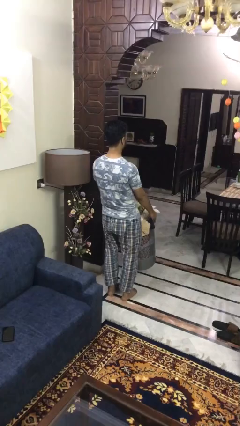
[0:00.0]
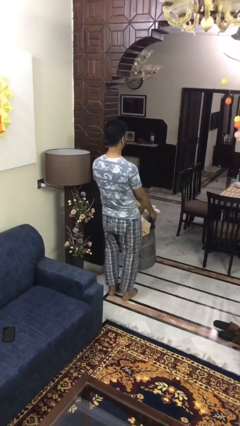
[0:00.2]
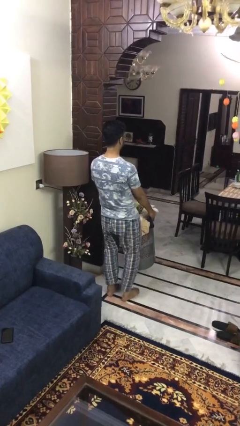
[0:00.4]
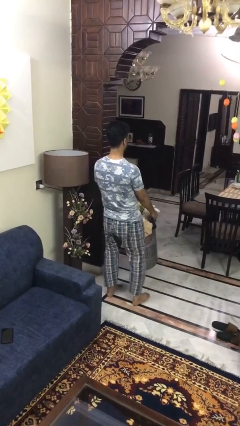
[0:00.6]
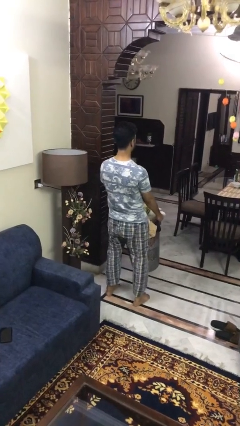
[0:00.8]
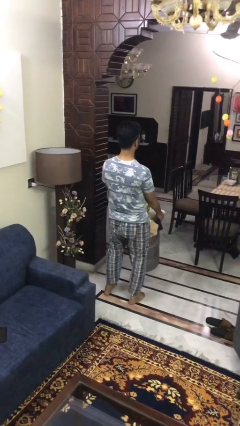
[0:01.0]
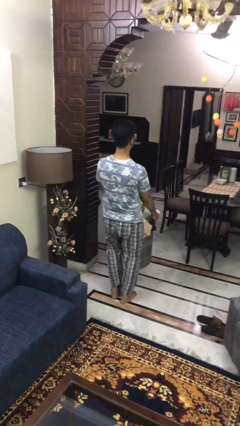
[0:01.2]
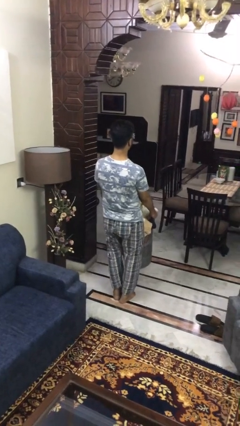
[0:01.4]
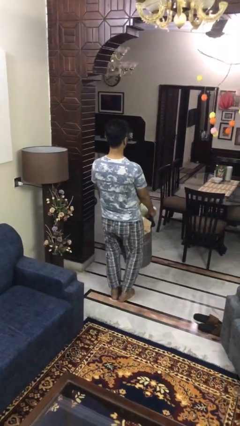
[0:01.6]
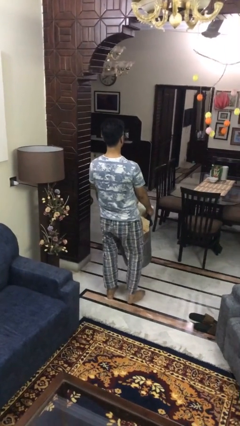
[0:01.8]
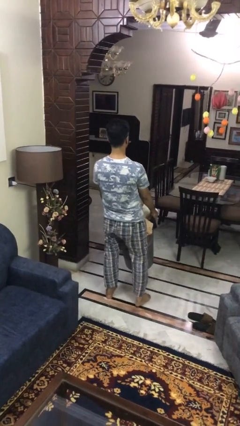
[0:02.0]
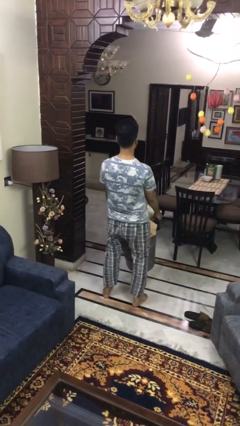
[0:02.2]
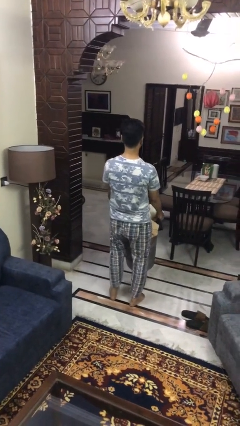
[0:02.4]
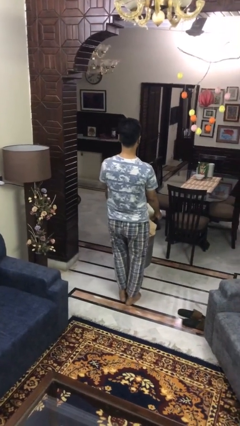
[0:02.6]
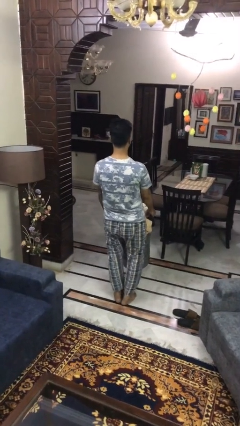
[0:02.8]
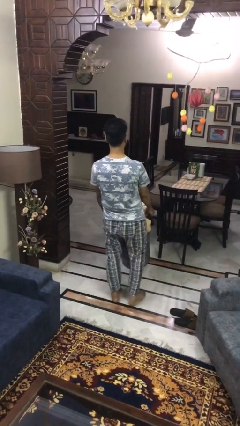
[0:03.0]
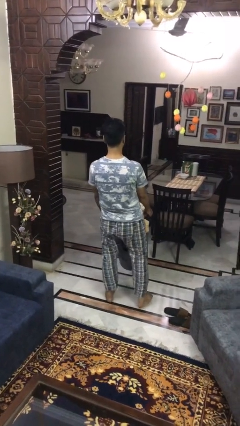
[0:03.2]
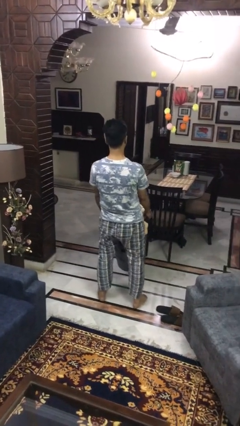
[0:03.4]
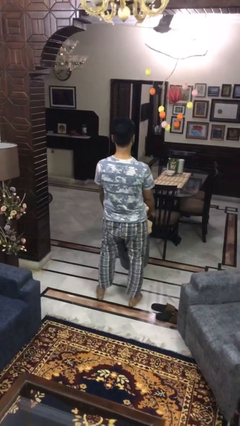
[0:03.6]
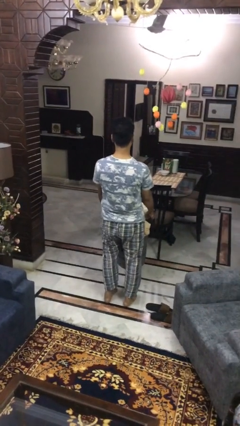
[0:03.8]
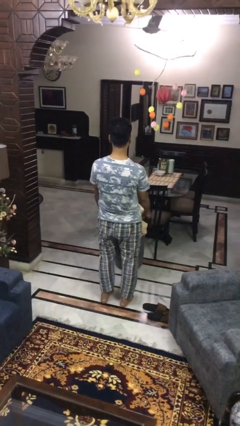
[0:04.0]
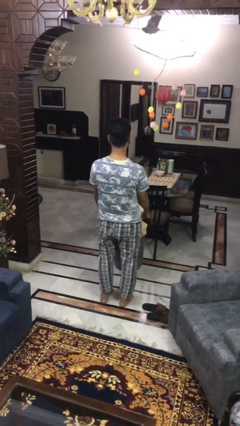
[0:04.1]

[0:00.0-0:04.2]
person carries laundry basket

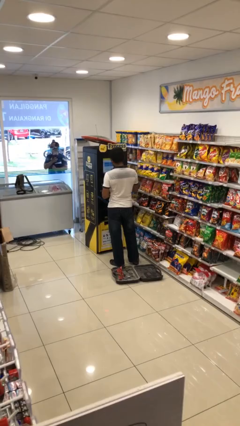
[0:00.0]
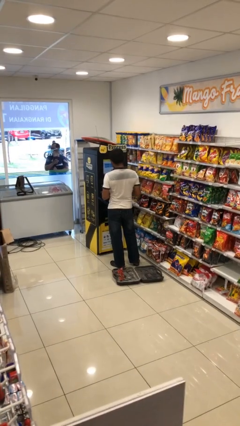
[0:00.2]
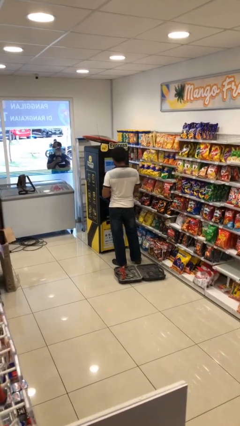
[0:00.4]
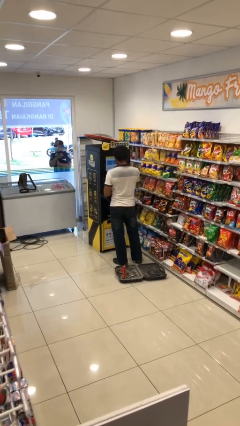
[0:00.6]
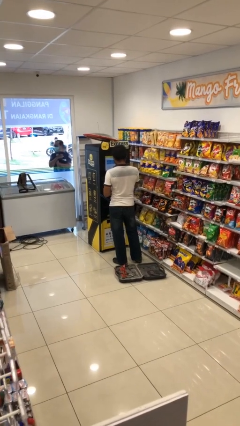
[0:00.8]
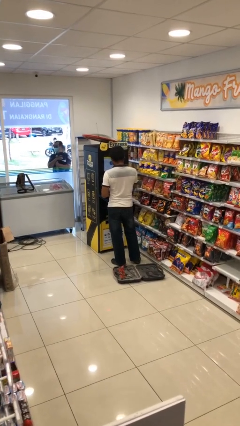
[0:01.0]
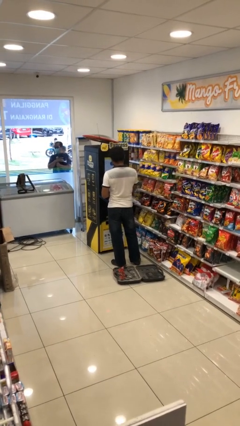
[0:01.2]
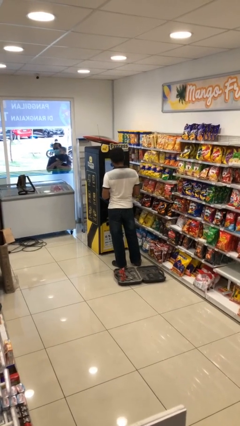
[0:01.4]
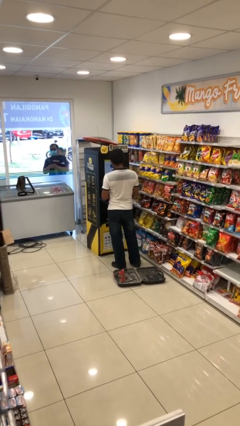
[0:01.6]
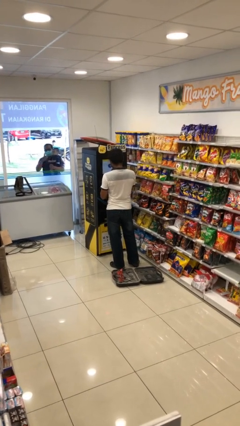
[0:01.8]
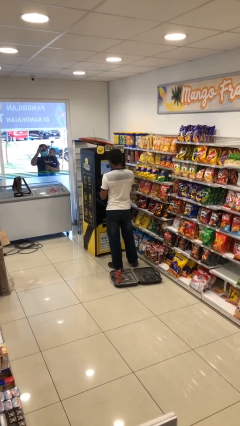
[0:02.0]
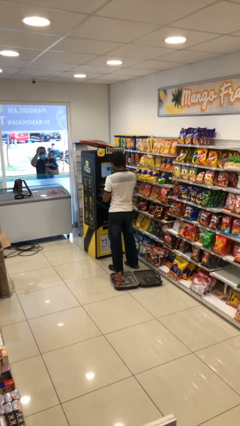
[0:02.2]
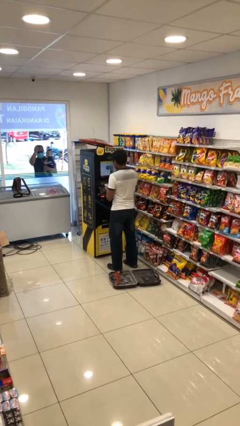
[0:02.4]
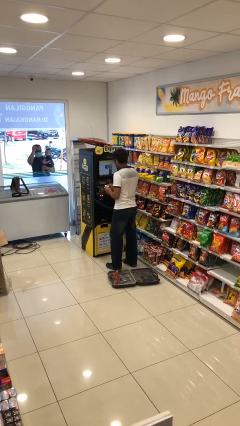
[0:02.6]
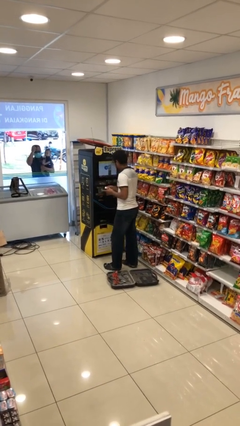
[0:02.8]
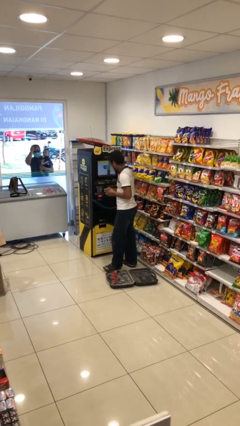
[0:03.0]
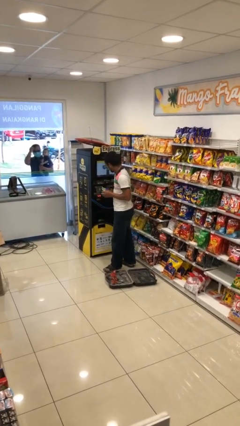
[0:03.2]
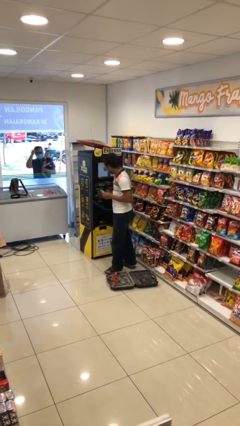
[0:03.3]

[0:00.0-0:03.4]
person purchases from machine

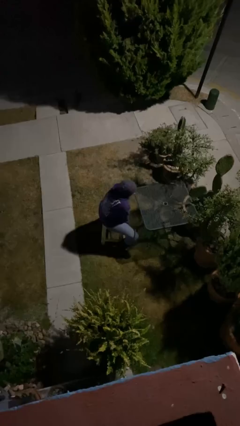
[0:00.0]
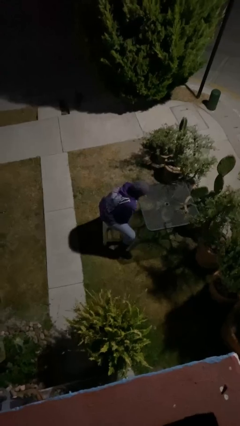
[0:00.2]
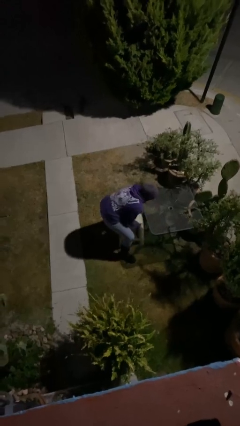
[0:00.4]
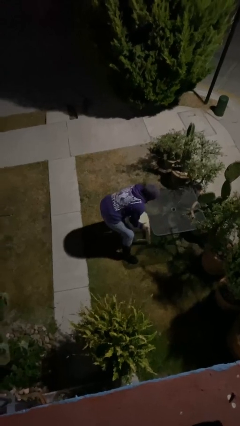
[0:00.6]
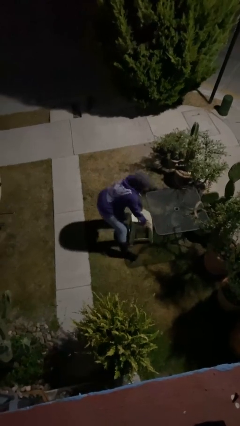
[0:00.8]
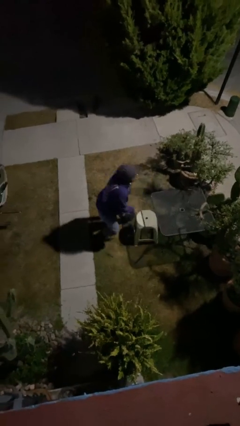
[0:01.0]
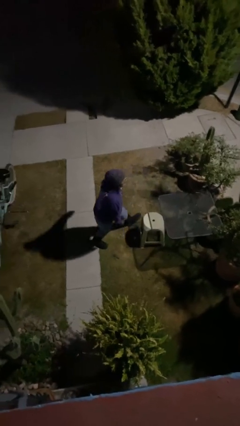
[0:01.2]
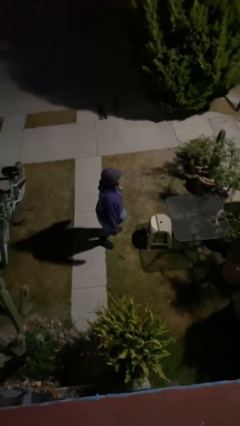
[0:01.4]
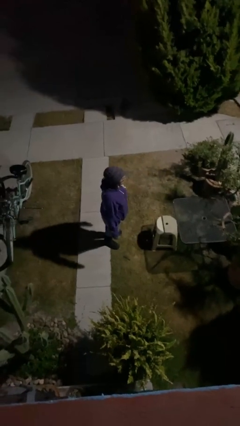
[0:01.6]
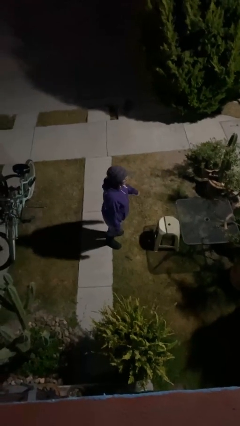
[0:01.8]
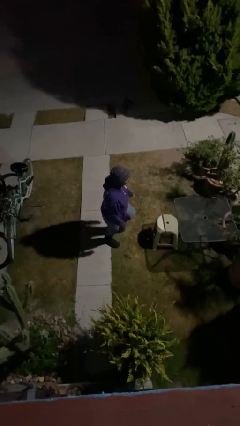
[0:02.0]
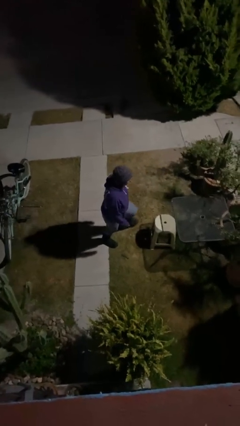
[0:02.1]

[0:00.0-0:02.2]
person stands up

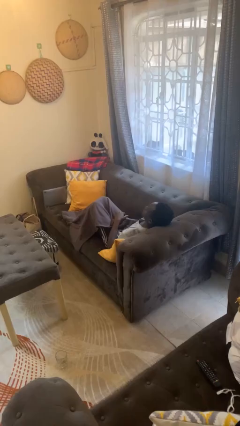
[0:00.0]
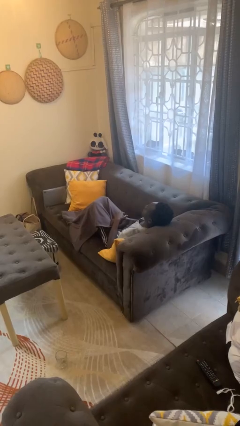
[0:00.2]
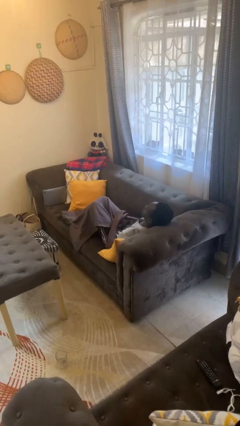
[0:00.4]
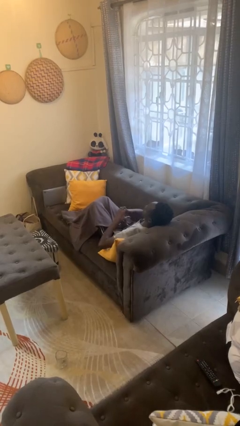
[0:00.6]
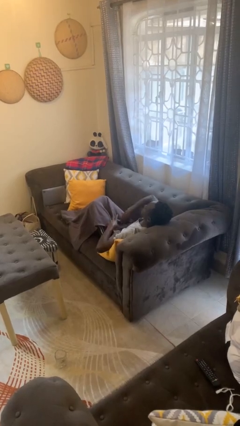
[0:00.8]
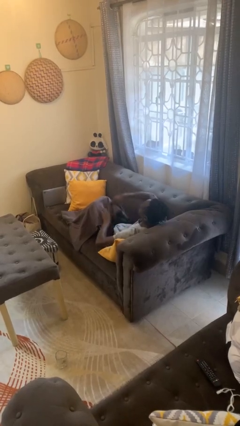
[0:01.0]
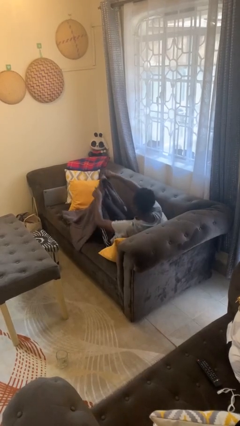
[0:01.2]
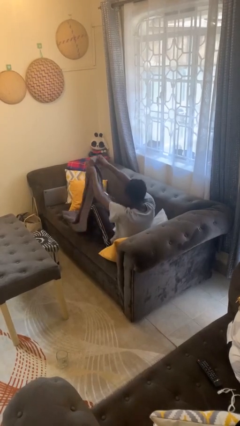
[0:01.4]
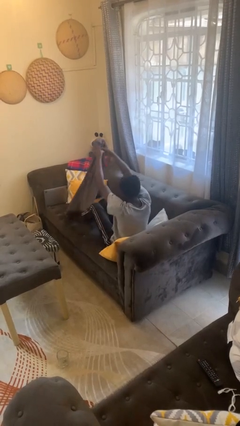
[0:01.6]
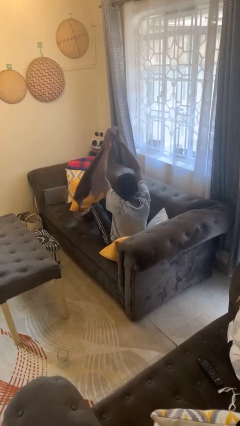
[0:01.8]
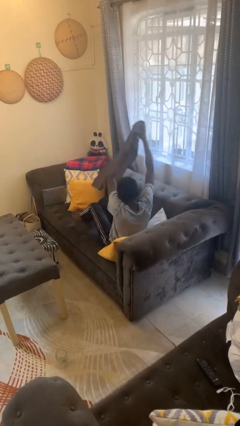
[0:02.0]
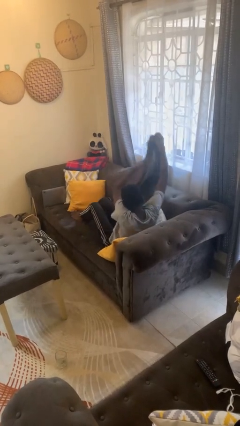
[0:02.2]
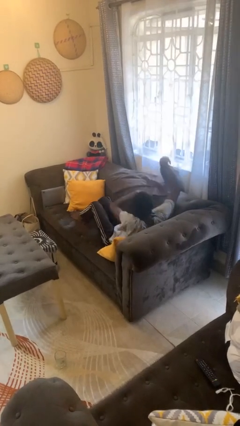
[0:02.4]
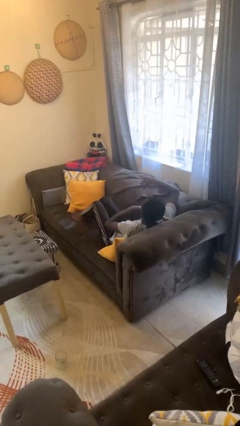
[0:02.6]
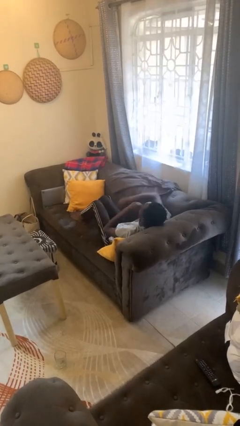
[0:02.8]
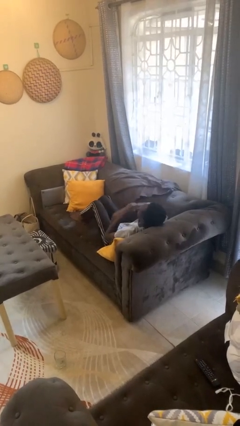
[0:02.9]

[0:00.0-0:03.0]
person uncovers with blanket

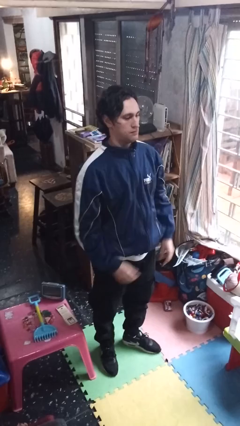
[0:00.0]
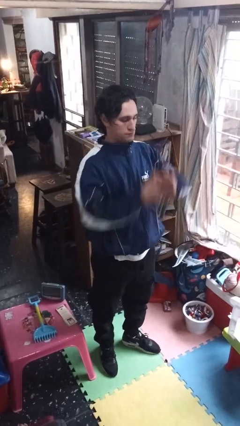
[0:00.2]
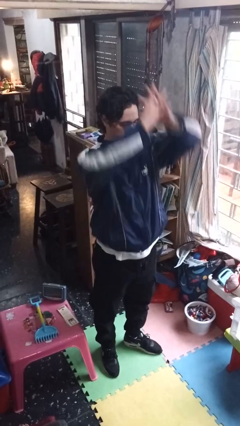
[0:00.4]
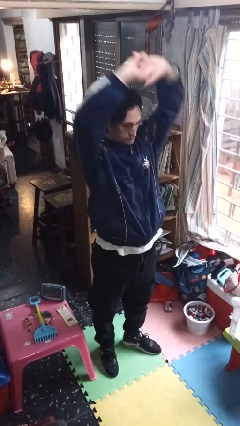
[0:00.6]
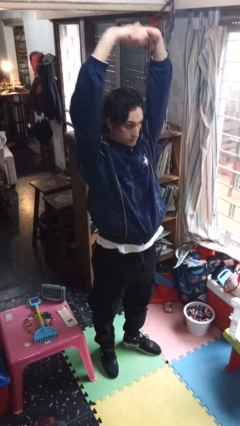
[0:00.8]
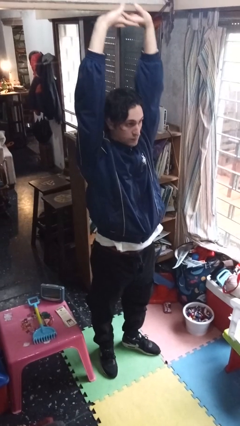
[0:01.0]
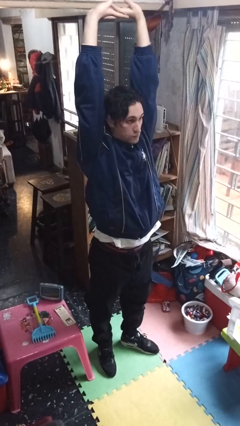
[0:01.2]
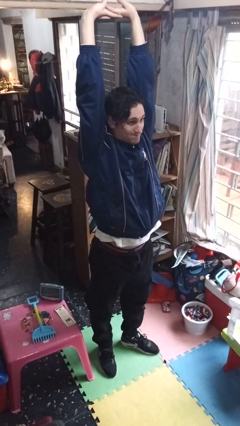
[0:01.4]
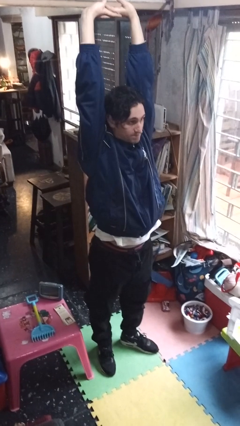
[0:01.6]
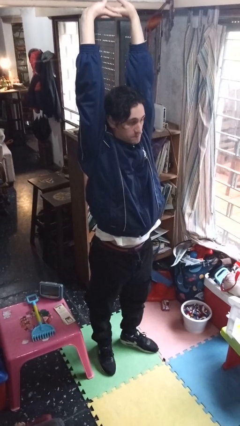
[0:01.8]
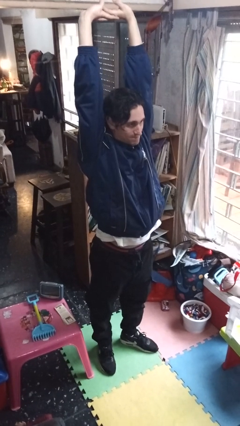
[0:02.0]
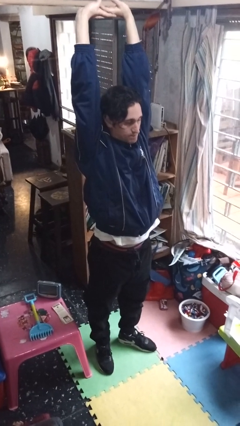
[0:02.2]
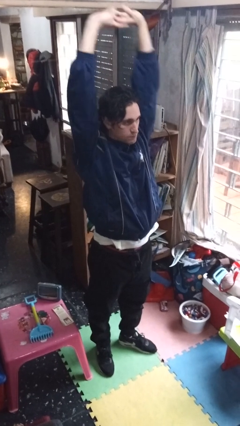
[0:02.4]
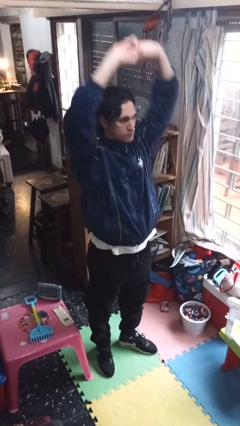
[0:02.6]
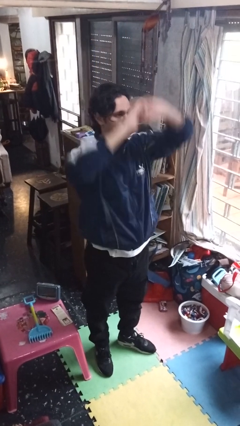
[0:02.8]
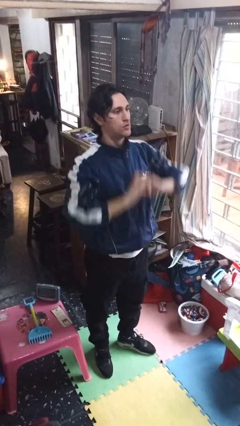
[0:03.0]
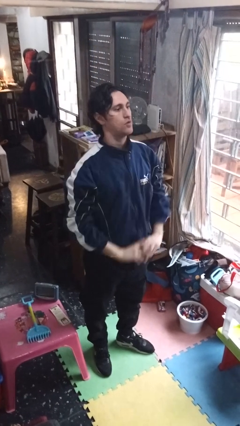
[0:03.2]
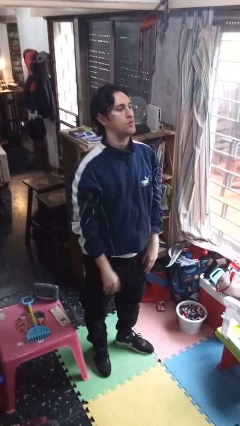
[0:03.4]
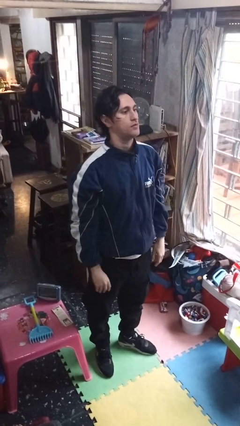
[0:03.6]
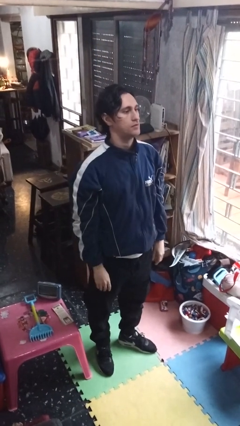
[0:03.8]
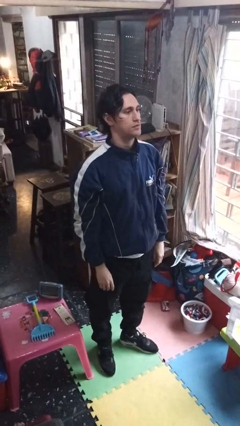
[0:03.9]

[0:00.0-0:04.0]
person stretches arms over head

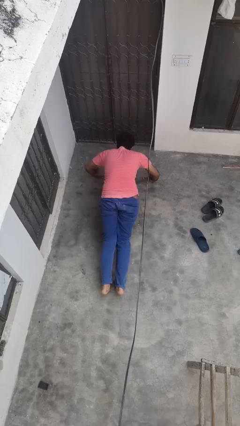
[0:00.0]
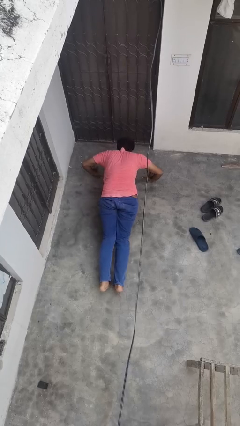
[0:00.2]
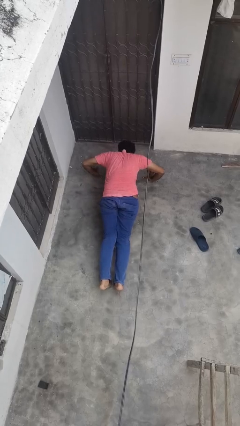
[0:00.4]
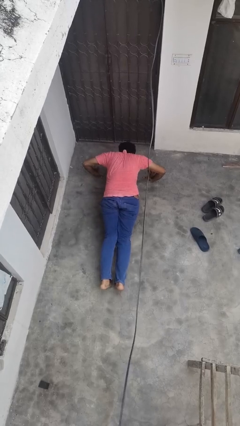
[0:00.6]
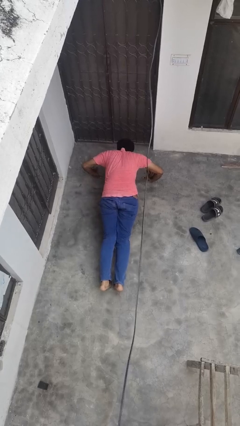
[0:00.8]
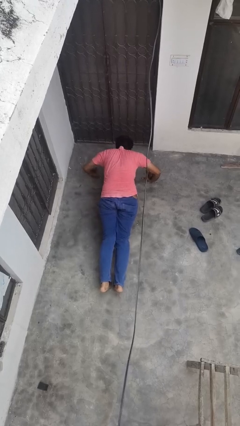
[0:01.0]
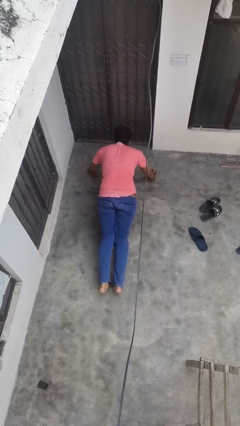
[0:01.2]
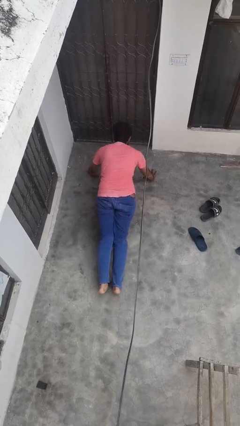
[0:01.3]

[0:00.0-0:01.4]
person exercises with pushup
